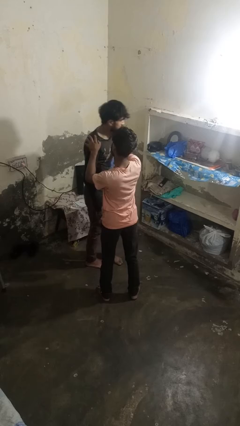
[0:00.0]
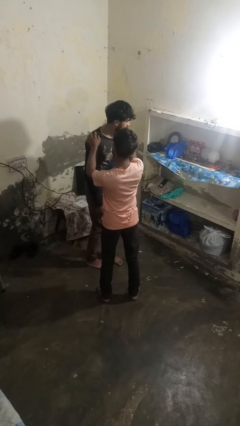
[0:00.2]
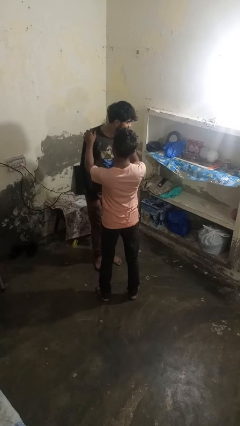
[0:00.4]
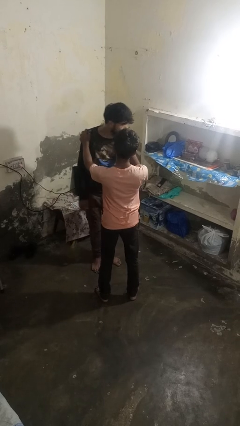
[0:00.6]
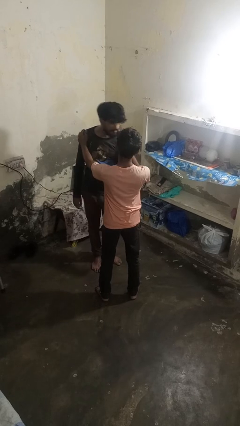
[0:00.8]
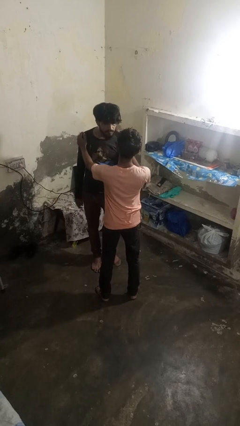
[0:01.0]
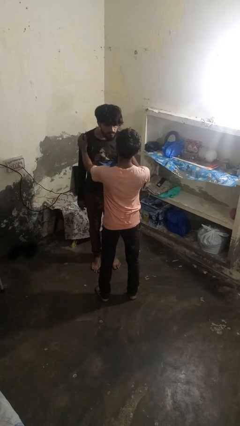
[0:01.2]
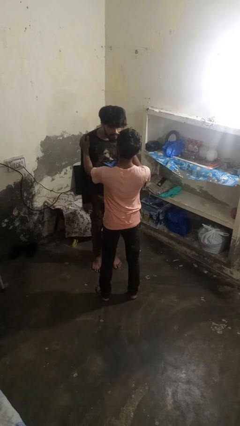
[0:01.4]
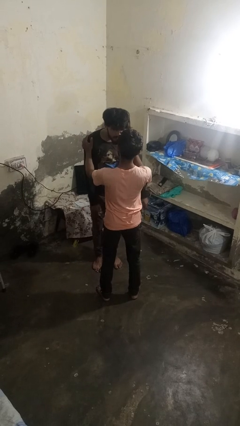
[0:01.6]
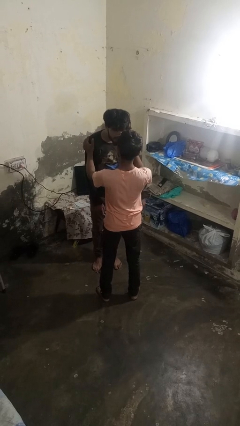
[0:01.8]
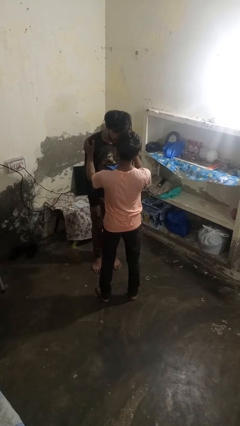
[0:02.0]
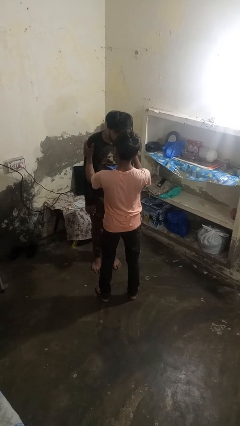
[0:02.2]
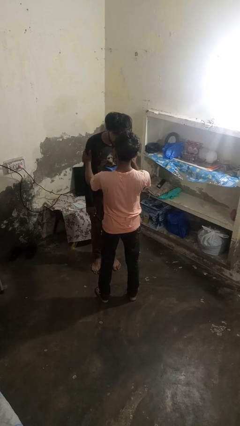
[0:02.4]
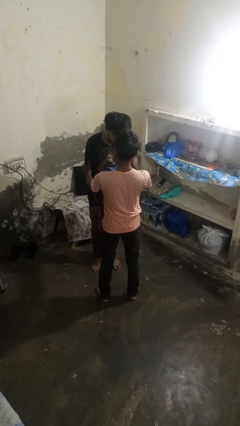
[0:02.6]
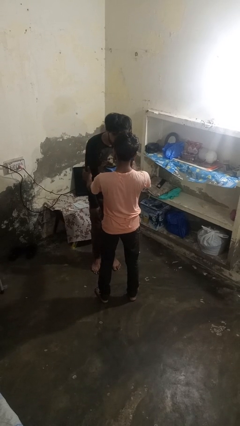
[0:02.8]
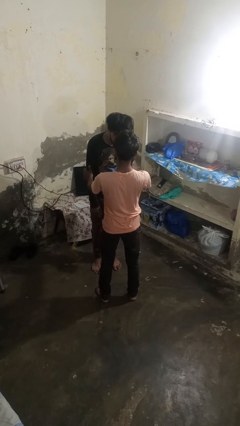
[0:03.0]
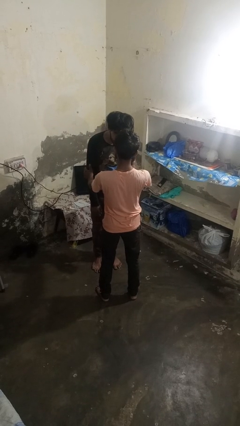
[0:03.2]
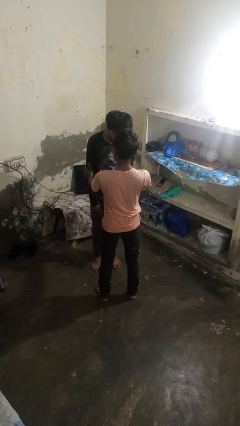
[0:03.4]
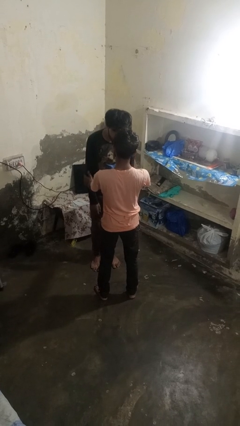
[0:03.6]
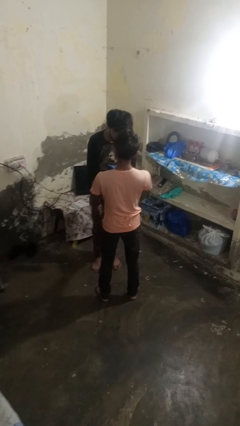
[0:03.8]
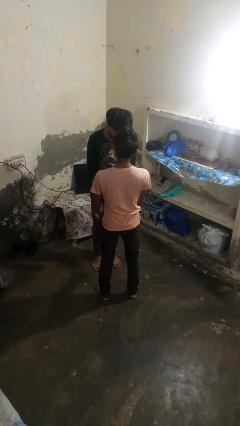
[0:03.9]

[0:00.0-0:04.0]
person spins person around

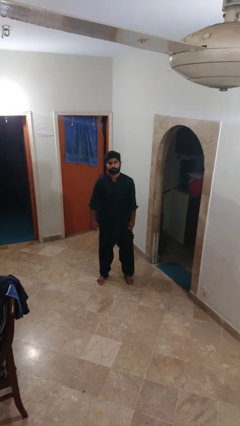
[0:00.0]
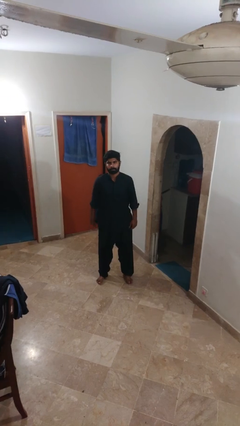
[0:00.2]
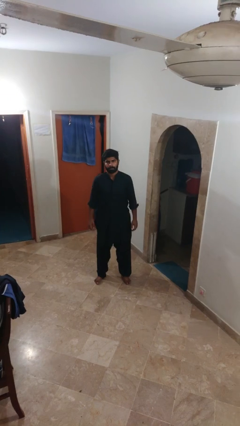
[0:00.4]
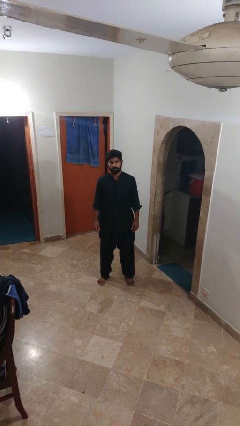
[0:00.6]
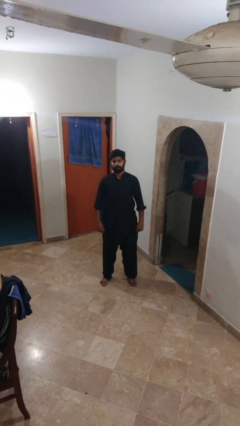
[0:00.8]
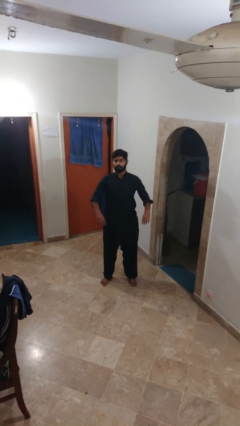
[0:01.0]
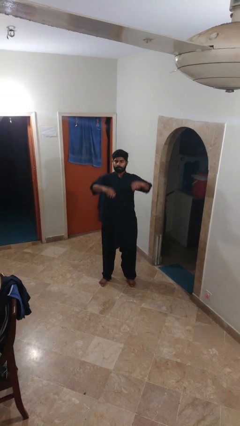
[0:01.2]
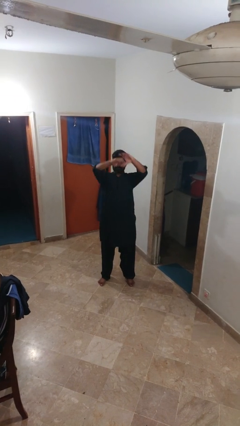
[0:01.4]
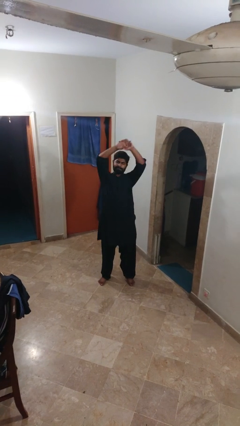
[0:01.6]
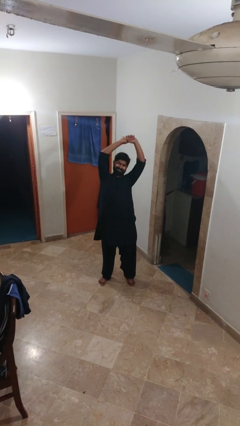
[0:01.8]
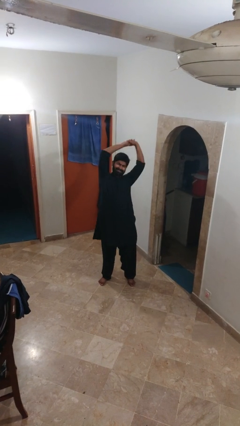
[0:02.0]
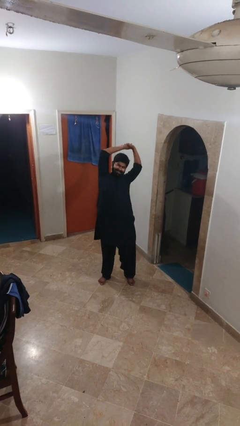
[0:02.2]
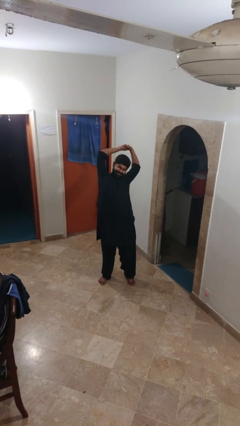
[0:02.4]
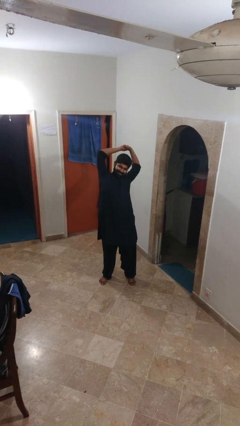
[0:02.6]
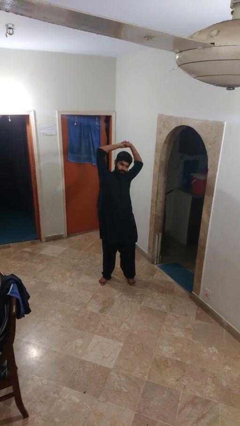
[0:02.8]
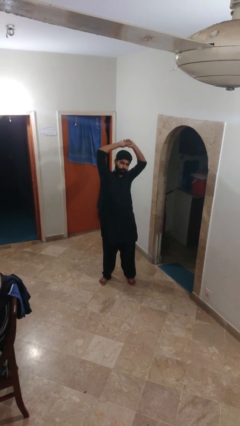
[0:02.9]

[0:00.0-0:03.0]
person stretches arms over head

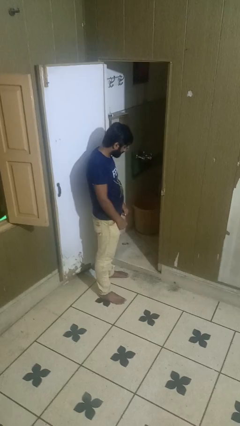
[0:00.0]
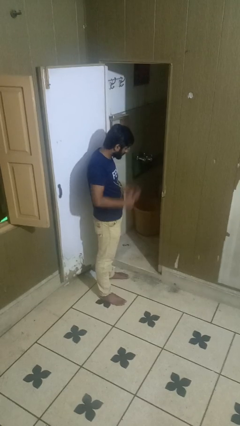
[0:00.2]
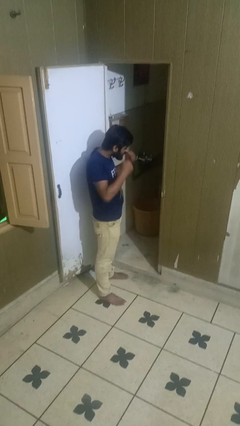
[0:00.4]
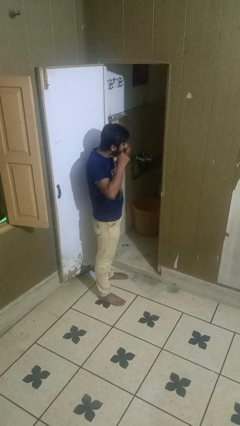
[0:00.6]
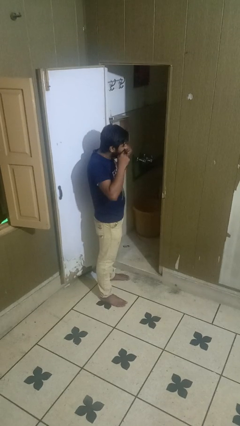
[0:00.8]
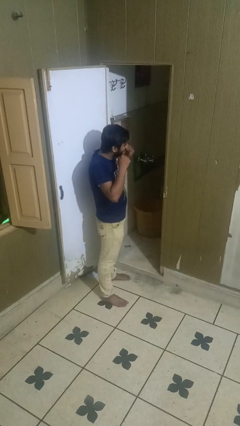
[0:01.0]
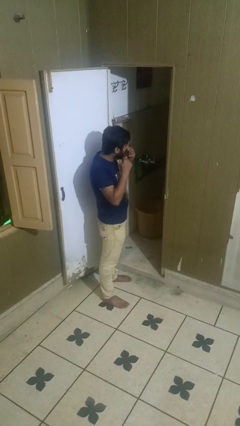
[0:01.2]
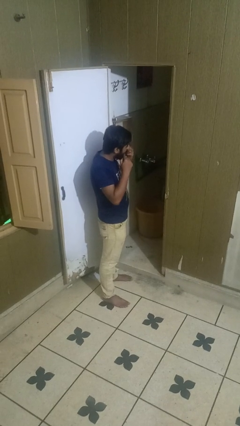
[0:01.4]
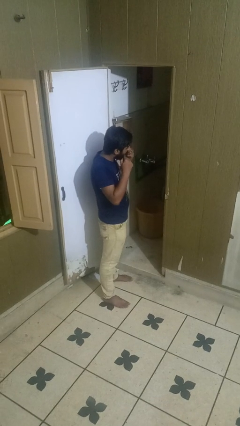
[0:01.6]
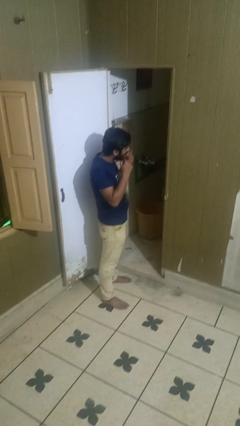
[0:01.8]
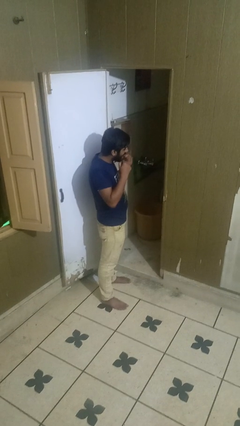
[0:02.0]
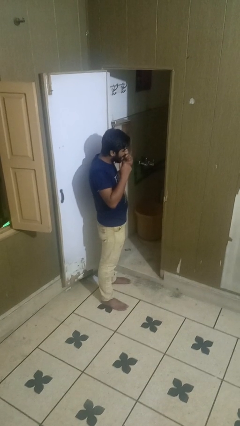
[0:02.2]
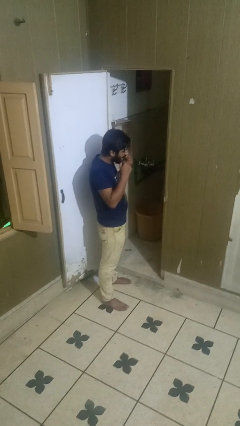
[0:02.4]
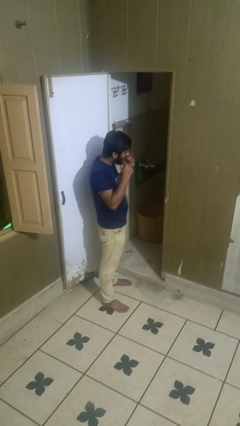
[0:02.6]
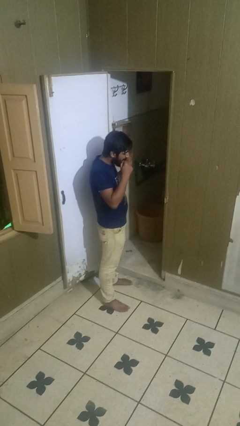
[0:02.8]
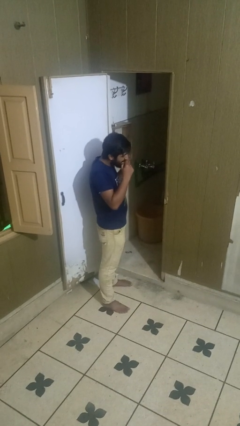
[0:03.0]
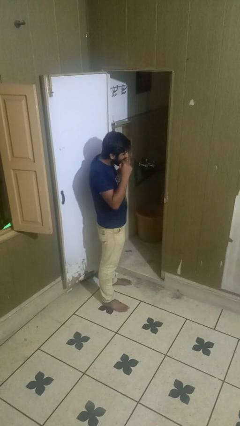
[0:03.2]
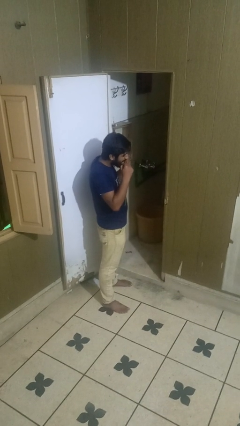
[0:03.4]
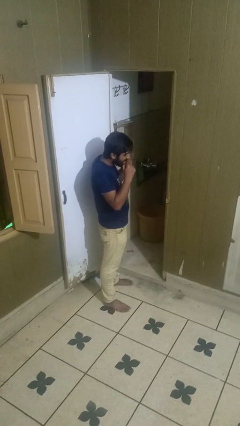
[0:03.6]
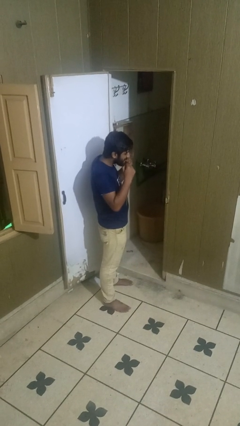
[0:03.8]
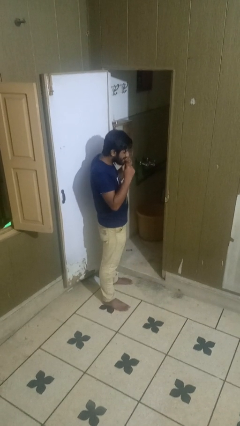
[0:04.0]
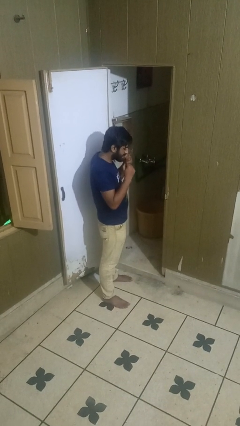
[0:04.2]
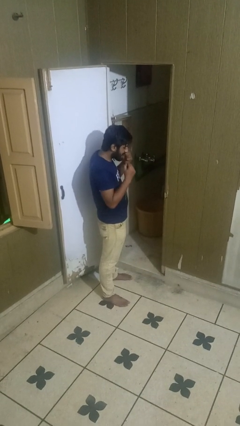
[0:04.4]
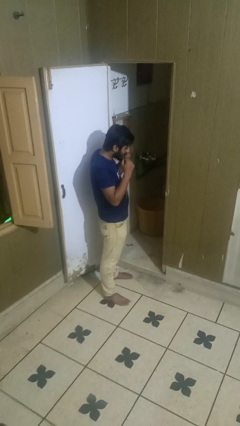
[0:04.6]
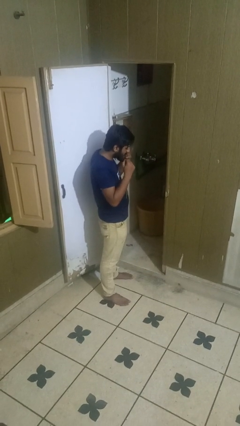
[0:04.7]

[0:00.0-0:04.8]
person flosses

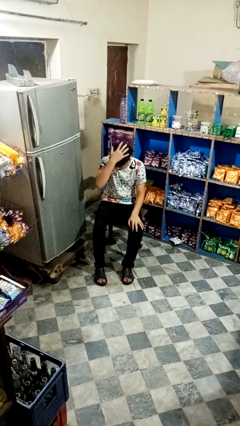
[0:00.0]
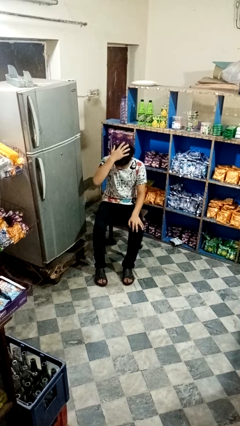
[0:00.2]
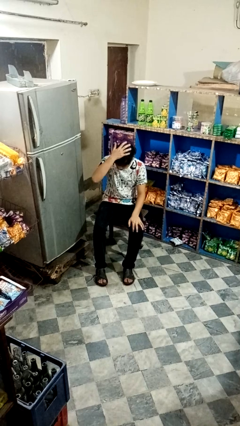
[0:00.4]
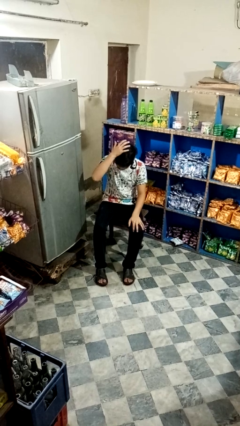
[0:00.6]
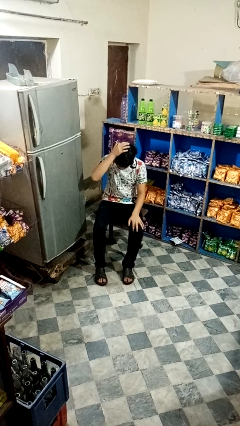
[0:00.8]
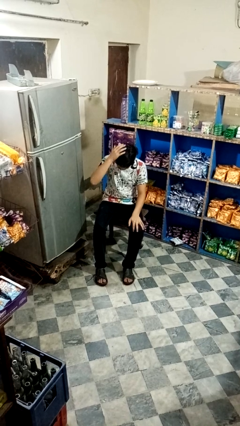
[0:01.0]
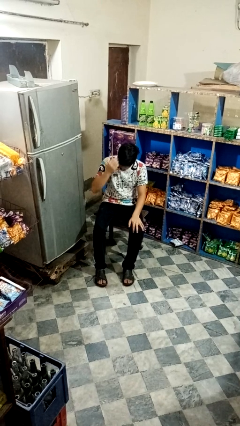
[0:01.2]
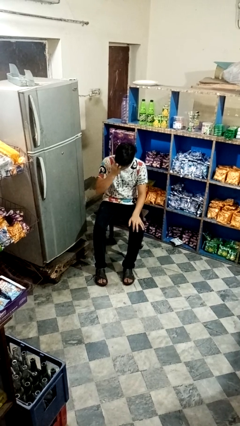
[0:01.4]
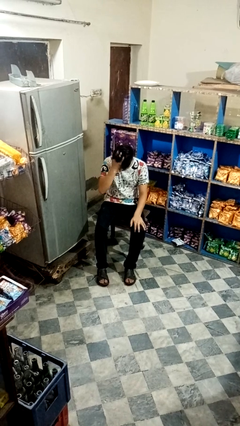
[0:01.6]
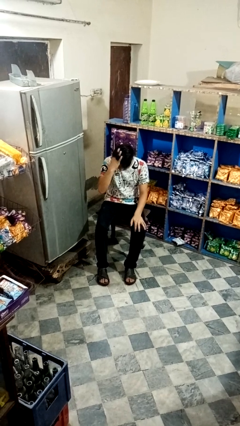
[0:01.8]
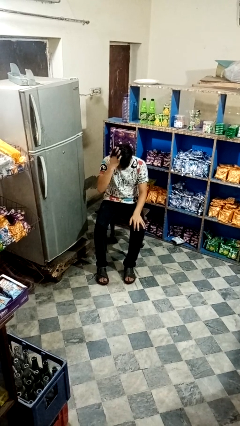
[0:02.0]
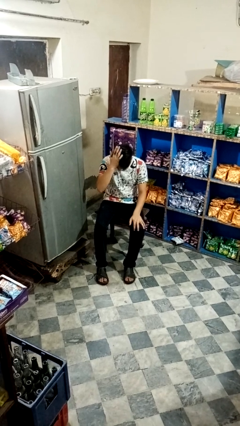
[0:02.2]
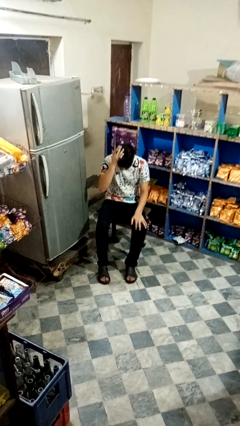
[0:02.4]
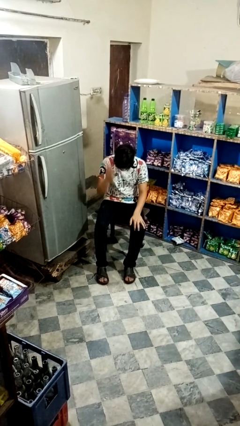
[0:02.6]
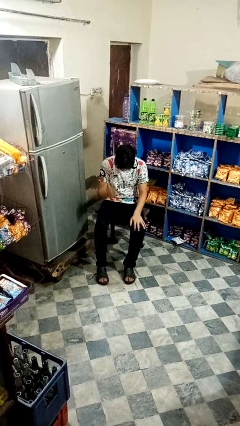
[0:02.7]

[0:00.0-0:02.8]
person pats head

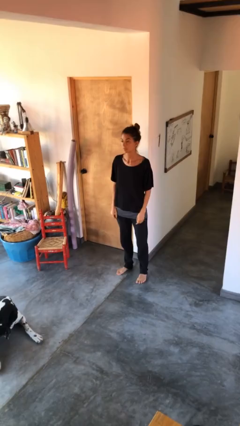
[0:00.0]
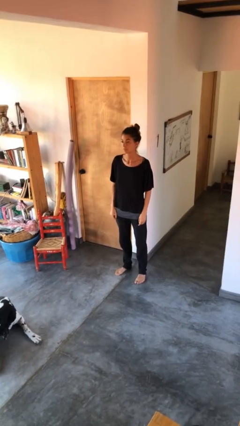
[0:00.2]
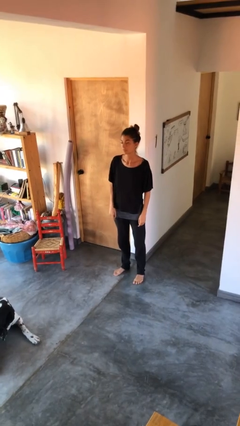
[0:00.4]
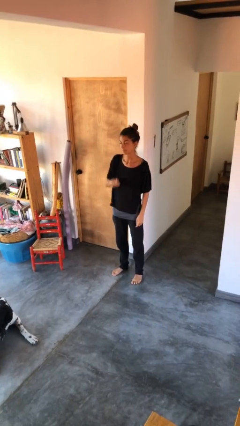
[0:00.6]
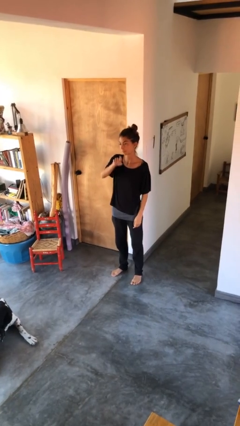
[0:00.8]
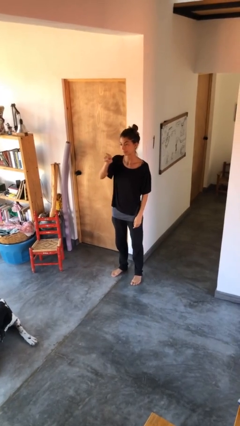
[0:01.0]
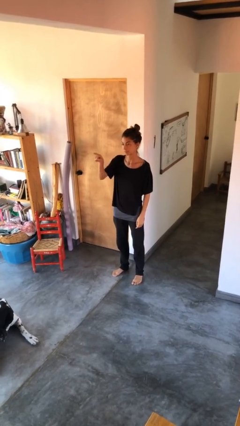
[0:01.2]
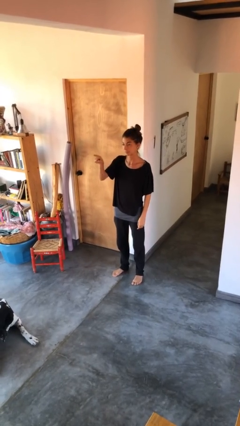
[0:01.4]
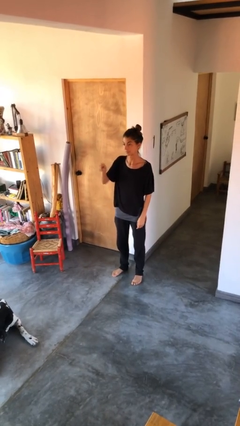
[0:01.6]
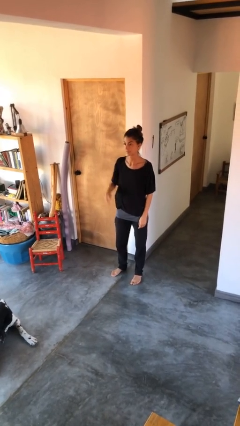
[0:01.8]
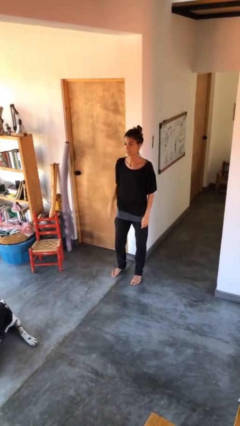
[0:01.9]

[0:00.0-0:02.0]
person gestures swipe right

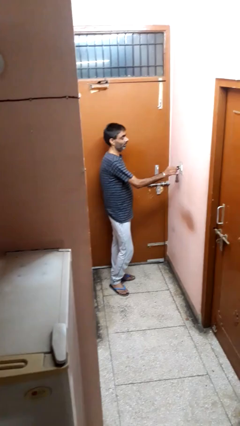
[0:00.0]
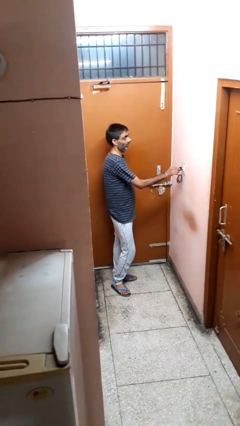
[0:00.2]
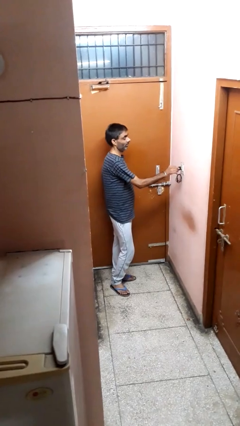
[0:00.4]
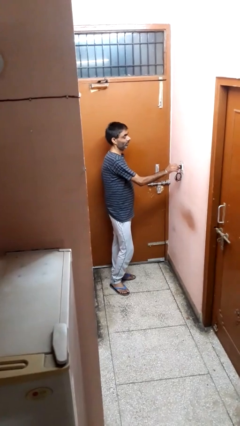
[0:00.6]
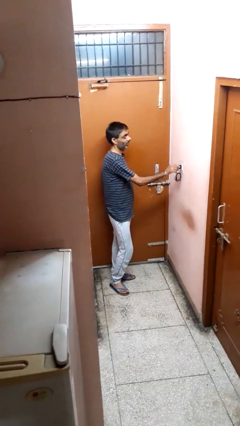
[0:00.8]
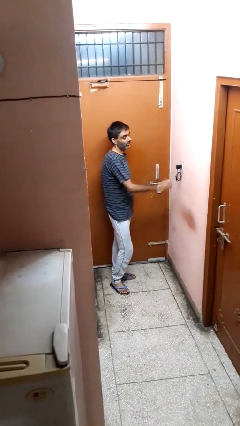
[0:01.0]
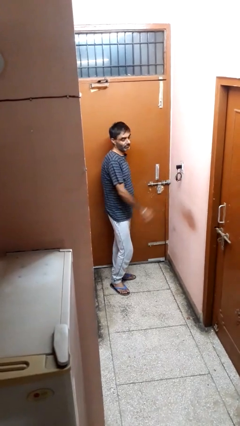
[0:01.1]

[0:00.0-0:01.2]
person plugs into electrical socket
